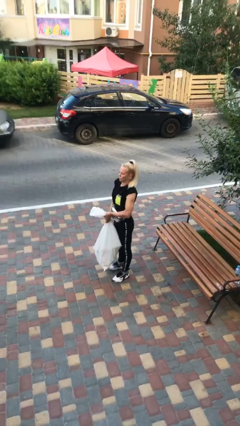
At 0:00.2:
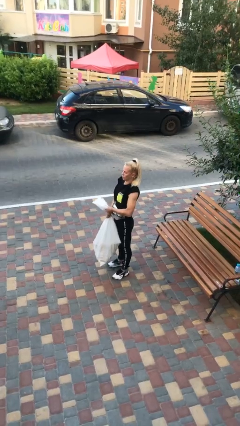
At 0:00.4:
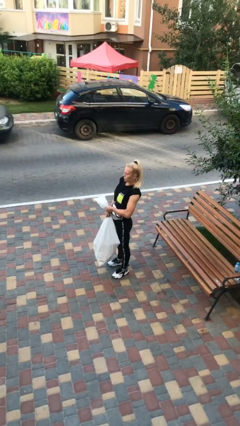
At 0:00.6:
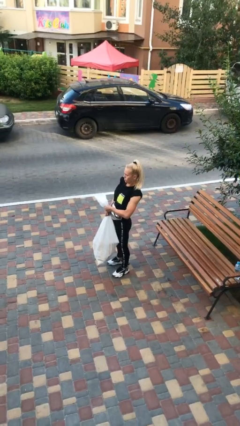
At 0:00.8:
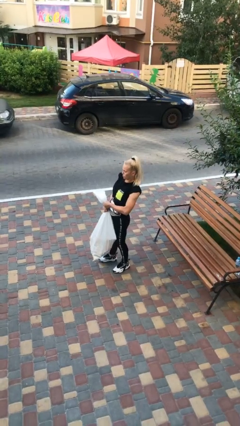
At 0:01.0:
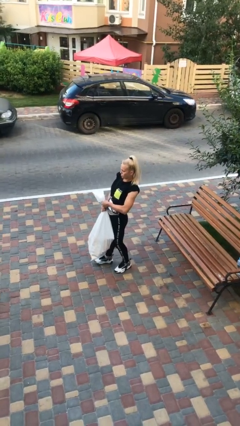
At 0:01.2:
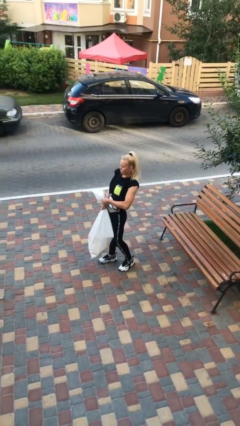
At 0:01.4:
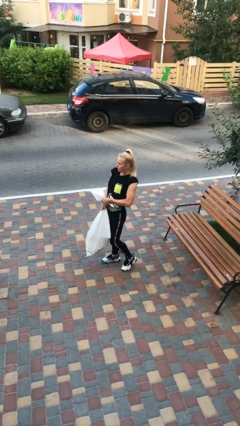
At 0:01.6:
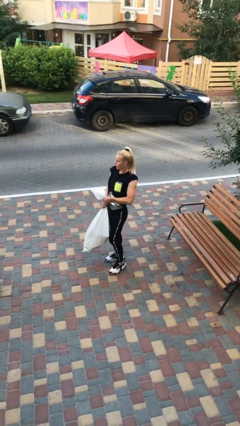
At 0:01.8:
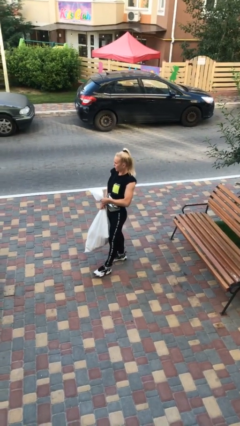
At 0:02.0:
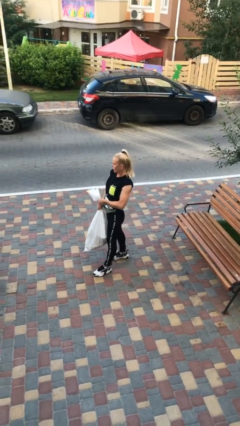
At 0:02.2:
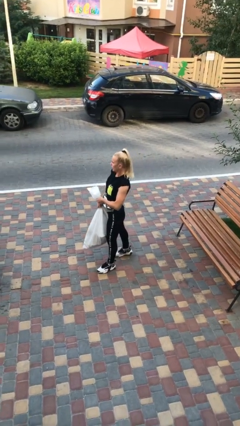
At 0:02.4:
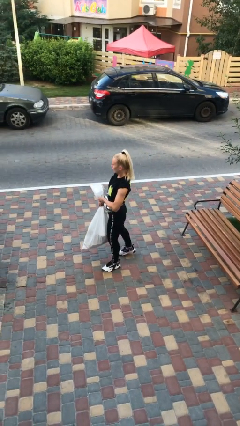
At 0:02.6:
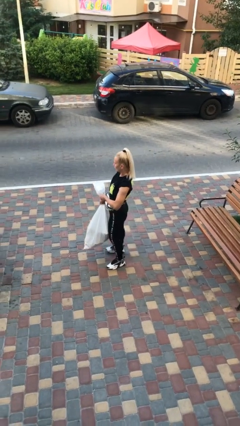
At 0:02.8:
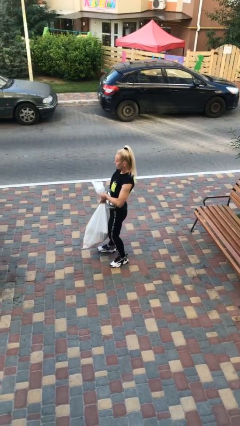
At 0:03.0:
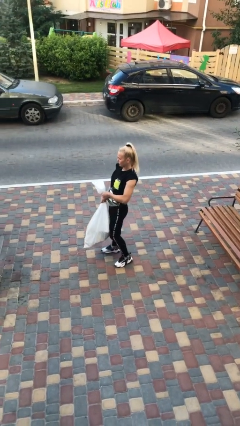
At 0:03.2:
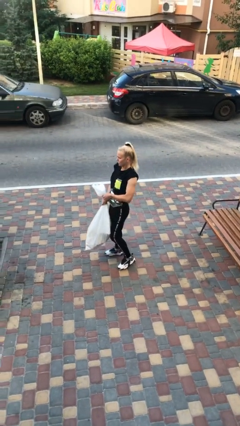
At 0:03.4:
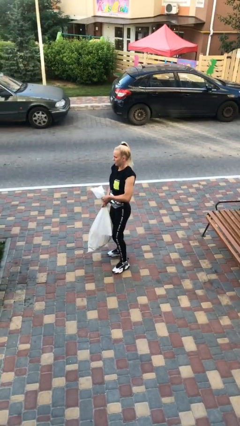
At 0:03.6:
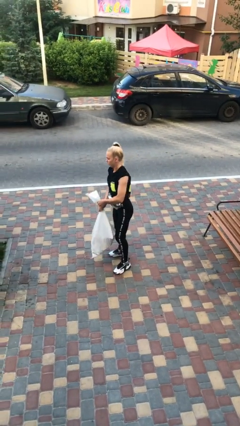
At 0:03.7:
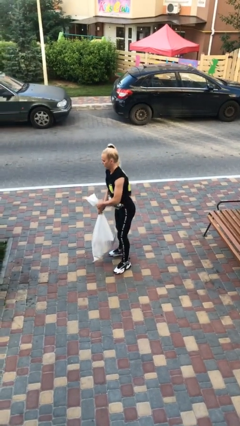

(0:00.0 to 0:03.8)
person carries heavy object

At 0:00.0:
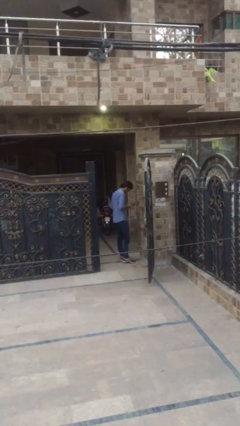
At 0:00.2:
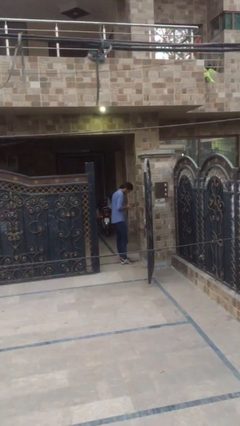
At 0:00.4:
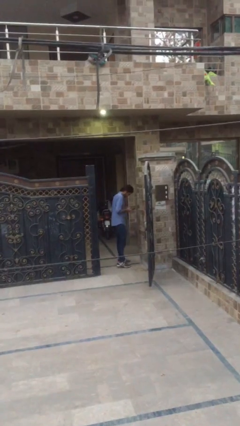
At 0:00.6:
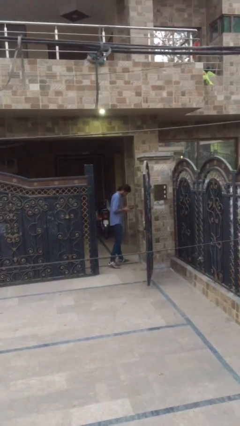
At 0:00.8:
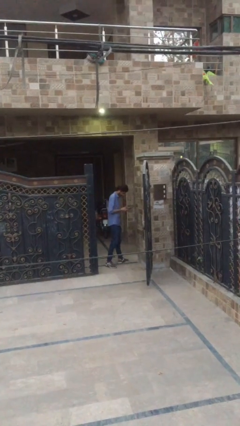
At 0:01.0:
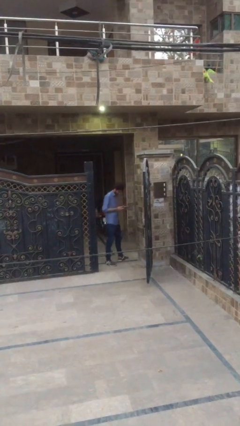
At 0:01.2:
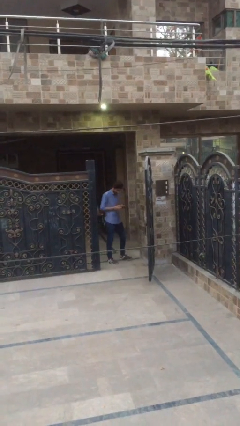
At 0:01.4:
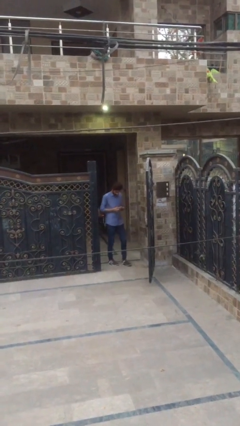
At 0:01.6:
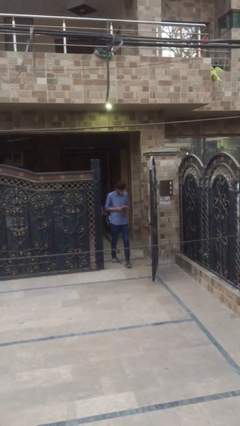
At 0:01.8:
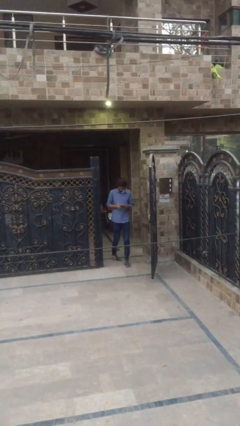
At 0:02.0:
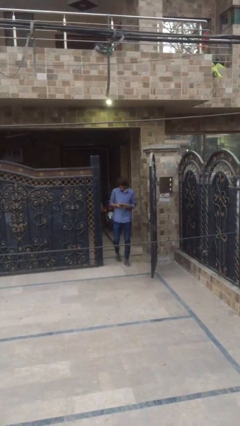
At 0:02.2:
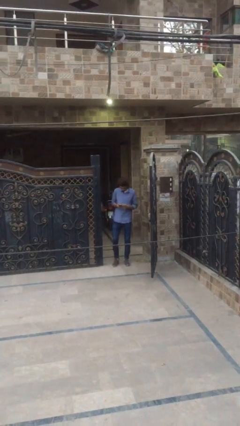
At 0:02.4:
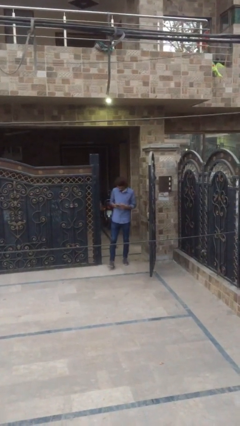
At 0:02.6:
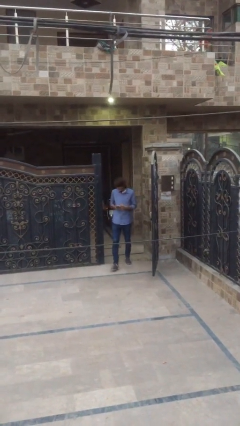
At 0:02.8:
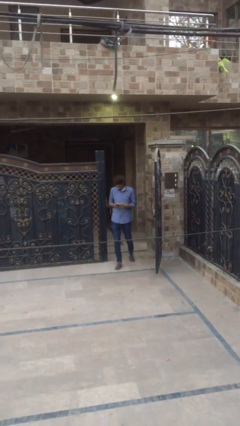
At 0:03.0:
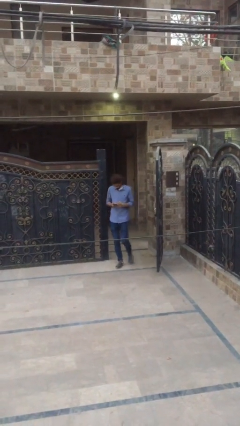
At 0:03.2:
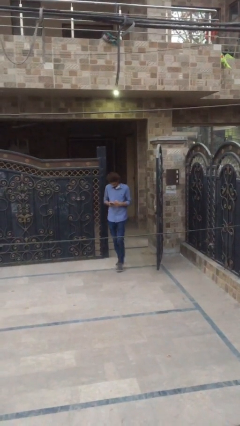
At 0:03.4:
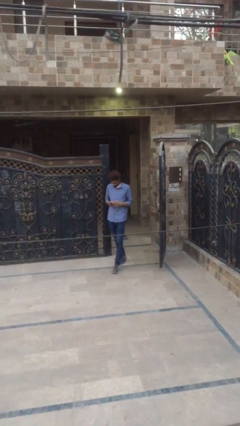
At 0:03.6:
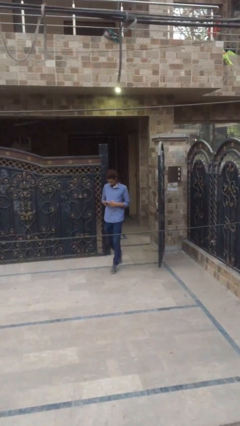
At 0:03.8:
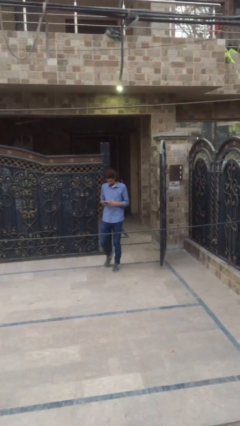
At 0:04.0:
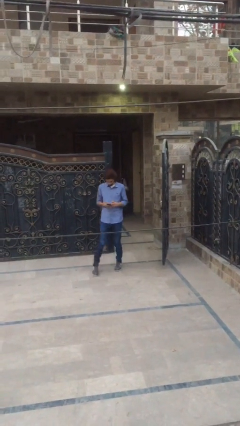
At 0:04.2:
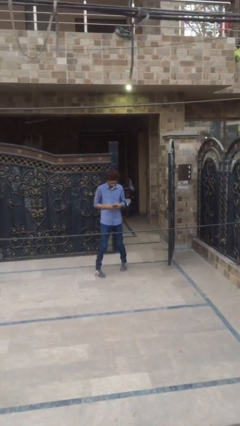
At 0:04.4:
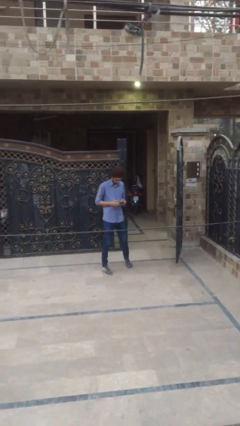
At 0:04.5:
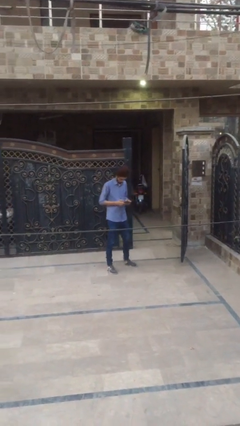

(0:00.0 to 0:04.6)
person exits scene through structure

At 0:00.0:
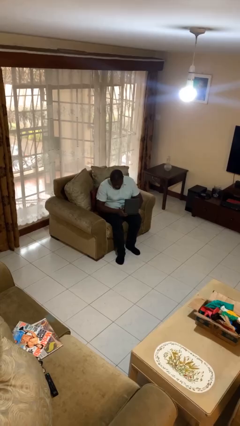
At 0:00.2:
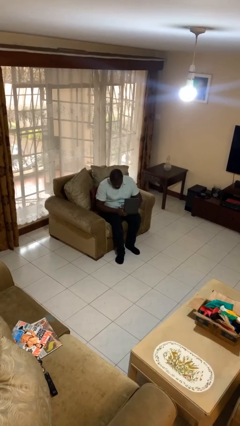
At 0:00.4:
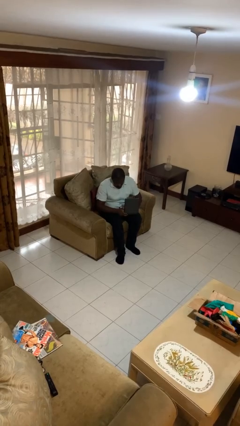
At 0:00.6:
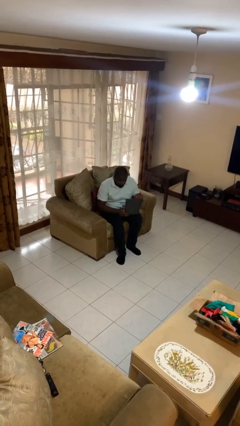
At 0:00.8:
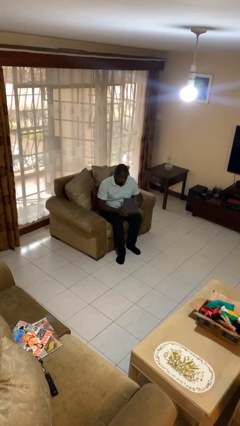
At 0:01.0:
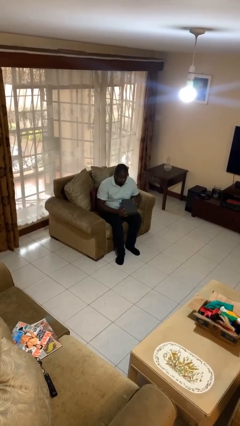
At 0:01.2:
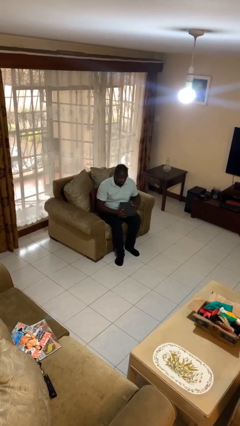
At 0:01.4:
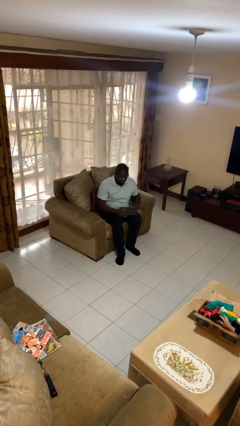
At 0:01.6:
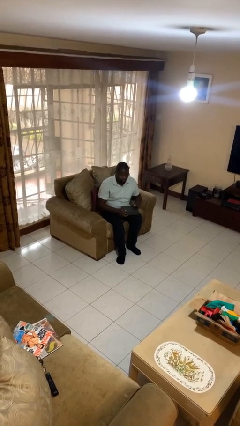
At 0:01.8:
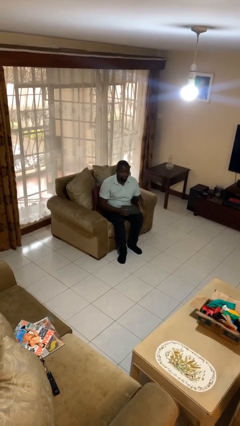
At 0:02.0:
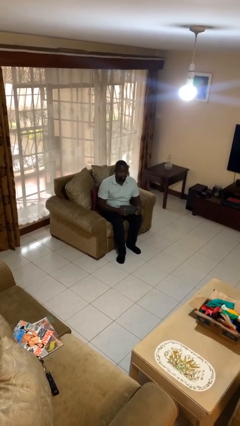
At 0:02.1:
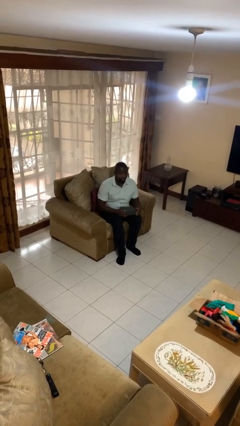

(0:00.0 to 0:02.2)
person closes jewelry box

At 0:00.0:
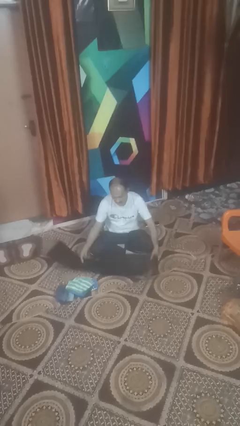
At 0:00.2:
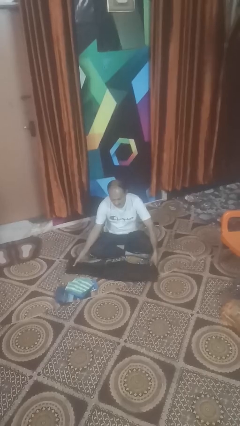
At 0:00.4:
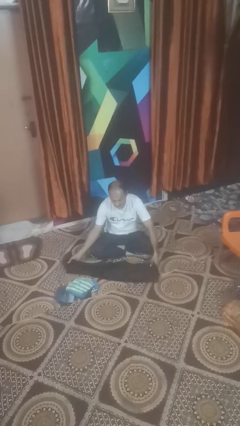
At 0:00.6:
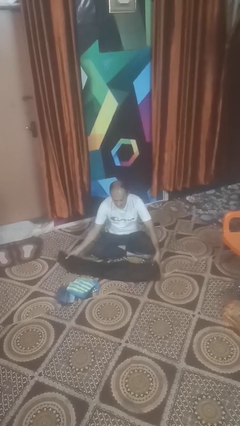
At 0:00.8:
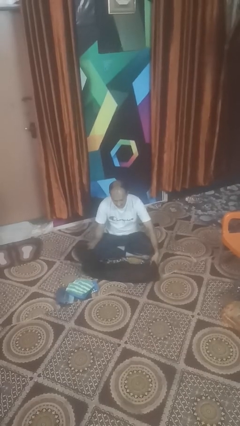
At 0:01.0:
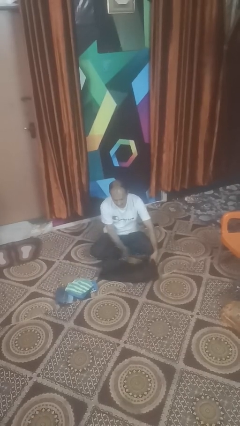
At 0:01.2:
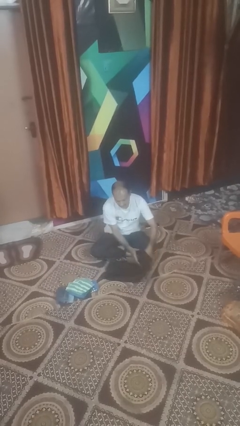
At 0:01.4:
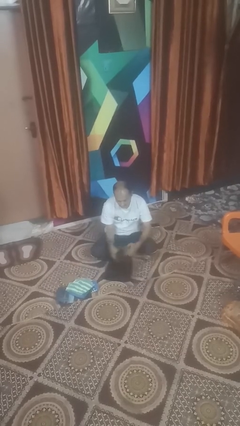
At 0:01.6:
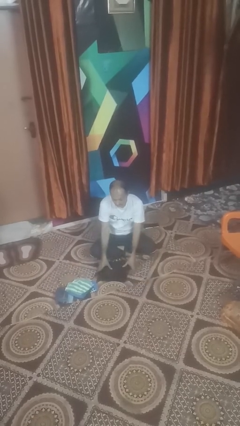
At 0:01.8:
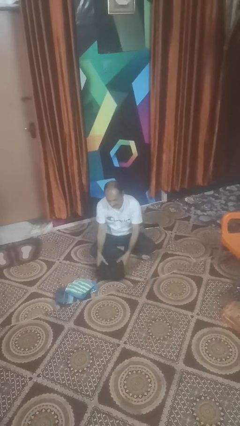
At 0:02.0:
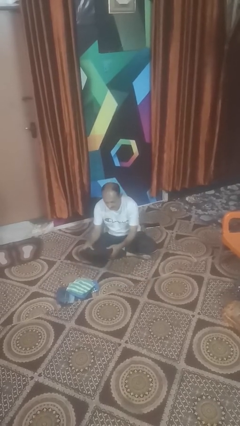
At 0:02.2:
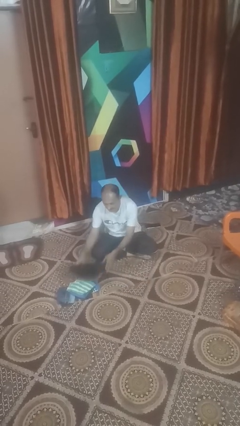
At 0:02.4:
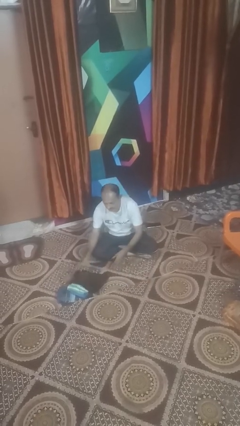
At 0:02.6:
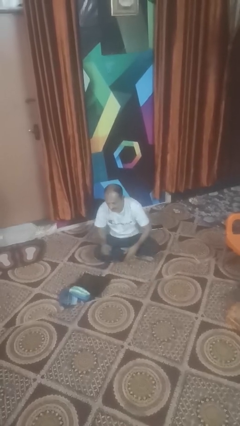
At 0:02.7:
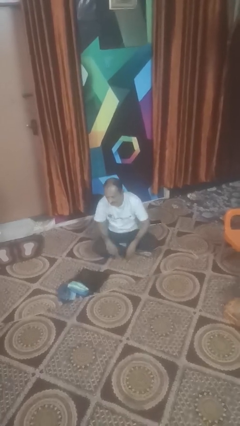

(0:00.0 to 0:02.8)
person folds pants

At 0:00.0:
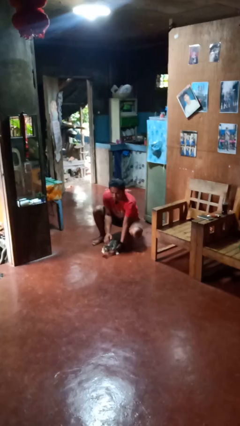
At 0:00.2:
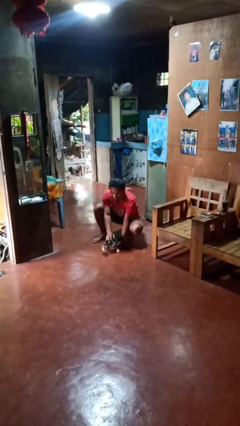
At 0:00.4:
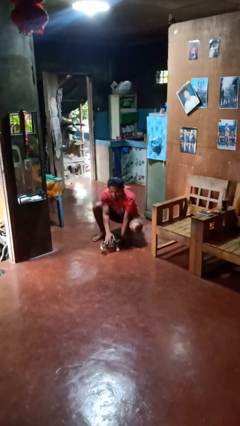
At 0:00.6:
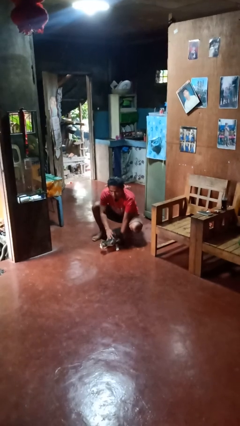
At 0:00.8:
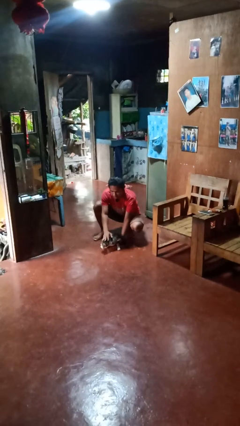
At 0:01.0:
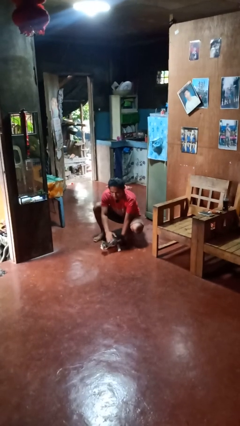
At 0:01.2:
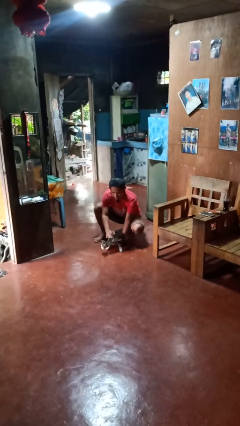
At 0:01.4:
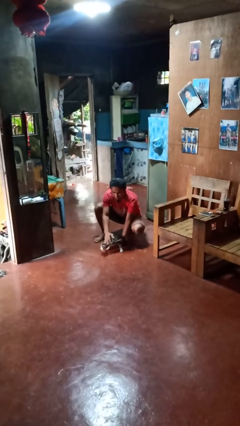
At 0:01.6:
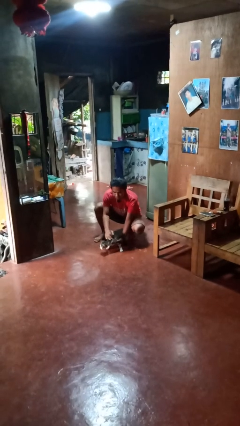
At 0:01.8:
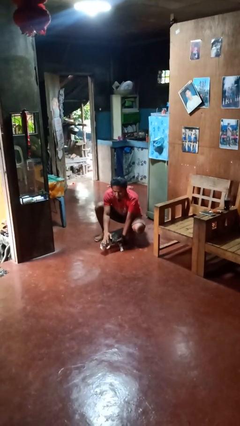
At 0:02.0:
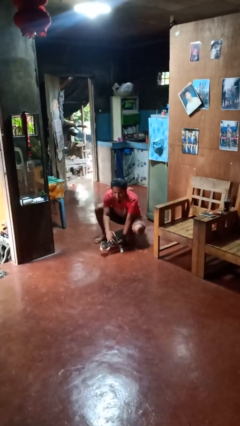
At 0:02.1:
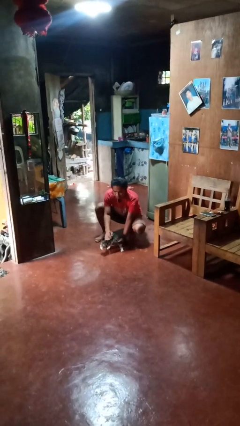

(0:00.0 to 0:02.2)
person pets cat

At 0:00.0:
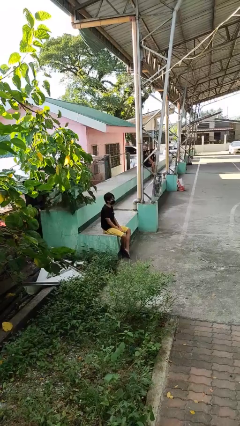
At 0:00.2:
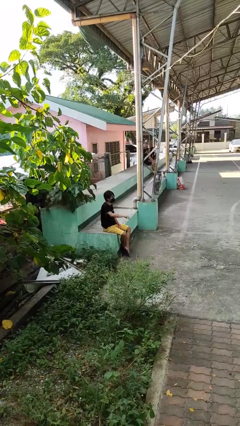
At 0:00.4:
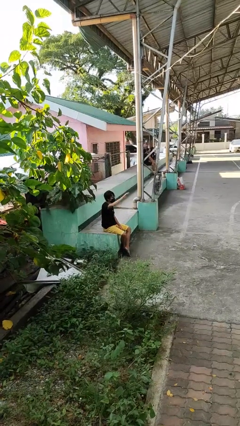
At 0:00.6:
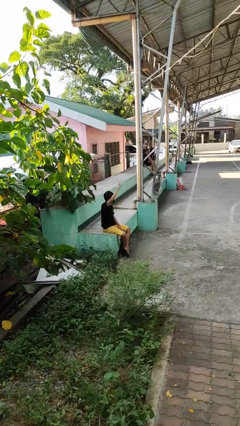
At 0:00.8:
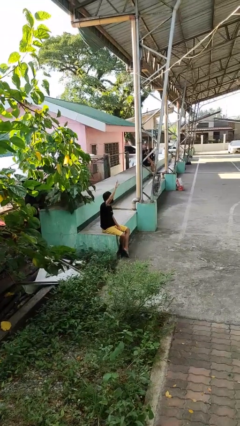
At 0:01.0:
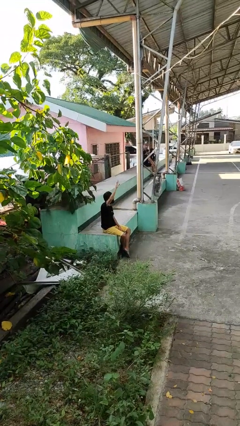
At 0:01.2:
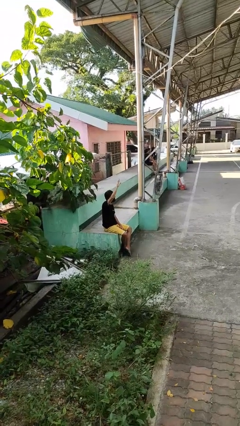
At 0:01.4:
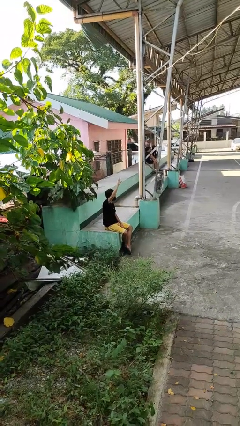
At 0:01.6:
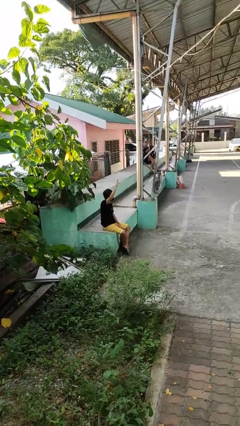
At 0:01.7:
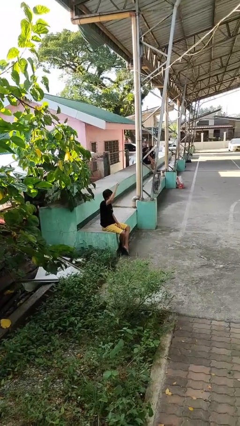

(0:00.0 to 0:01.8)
person gestures raise hand

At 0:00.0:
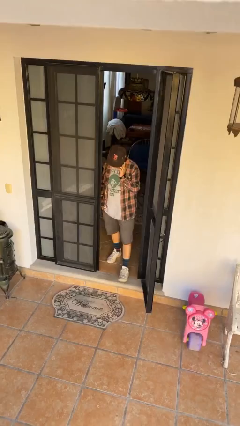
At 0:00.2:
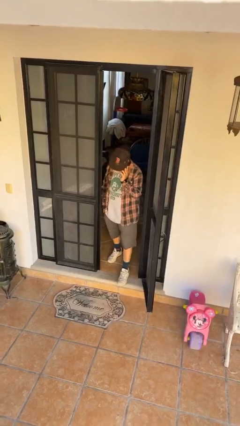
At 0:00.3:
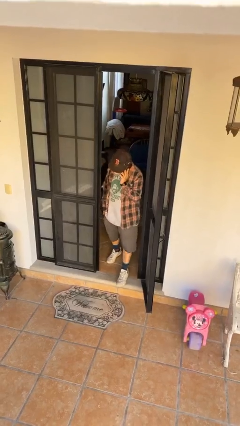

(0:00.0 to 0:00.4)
person enters scene through structure
